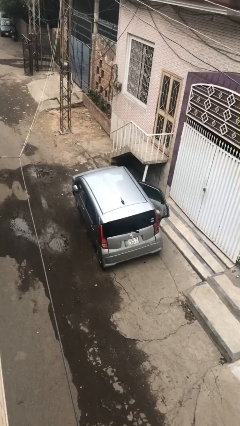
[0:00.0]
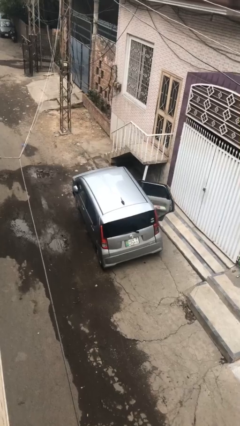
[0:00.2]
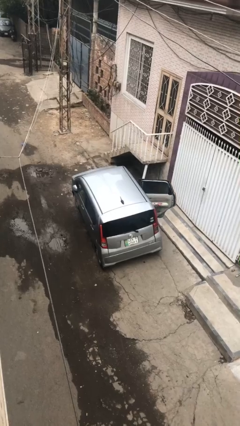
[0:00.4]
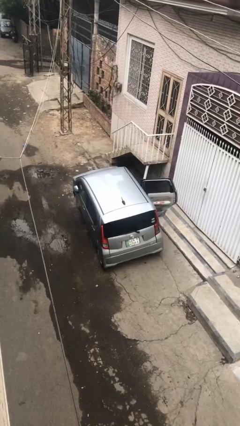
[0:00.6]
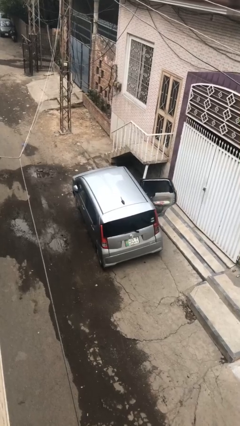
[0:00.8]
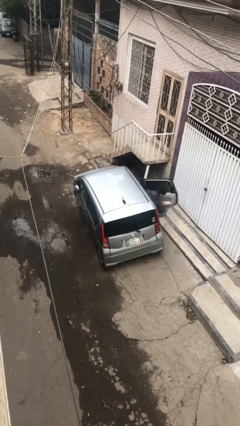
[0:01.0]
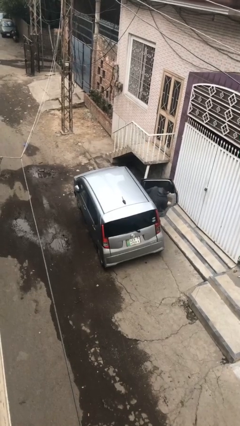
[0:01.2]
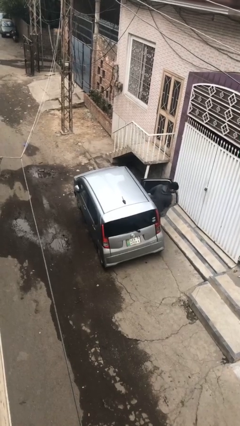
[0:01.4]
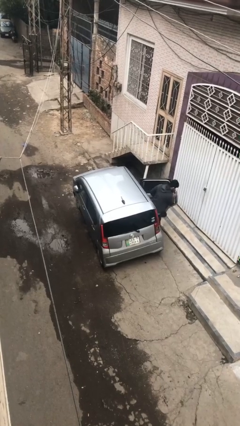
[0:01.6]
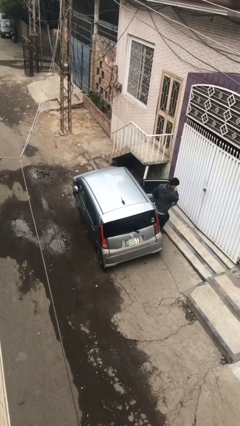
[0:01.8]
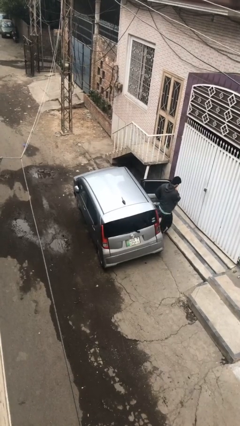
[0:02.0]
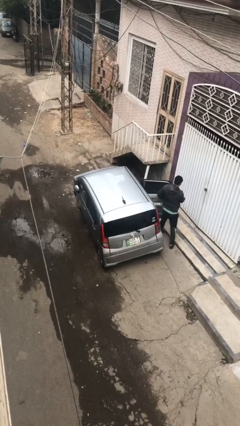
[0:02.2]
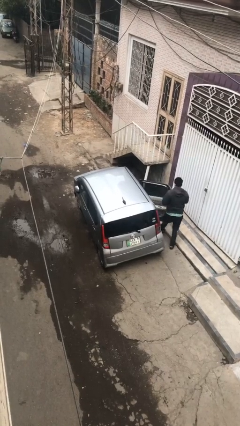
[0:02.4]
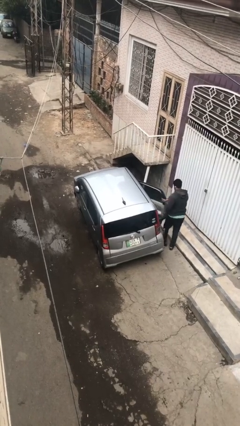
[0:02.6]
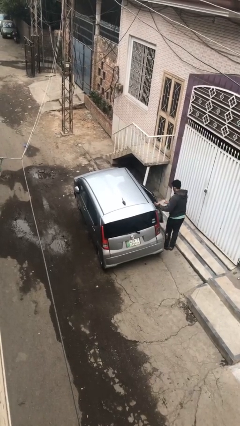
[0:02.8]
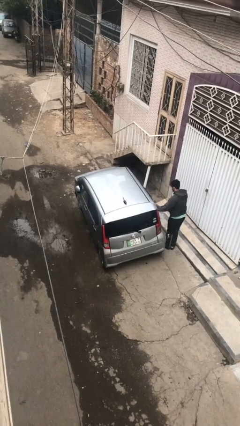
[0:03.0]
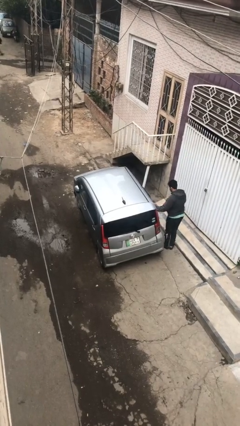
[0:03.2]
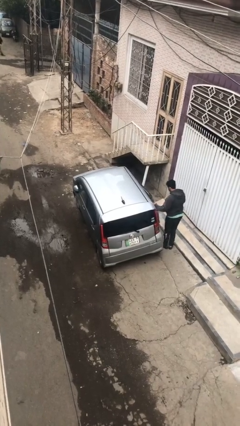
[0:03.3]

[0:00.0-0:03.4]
car drops off person

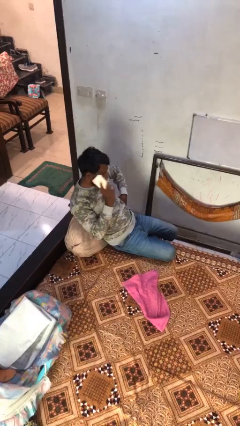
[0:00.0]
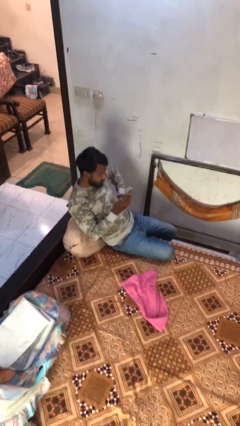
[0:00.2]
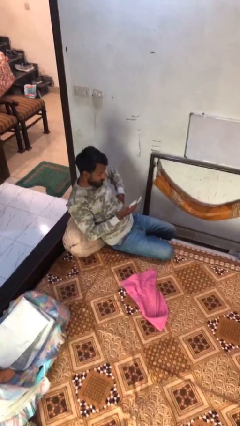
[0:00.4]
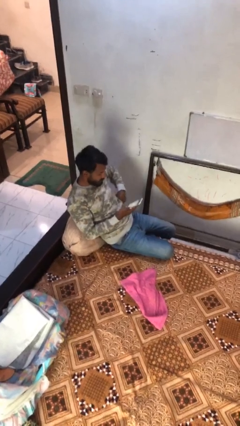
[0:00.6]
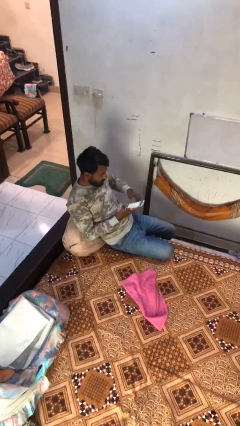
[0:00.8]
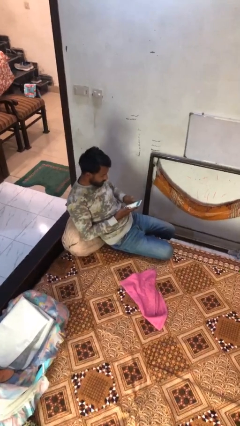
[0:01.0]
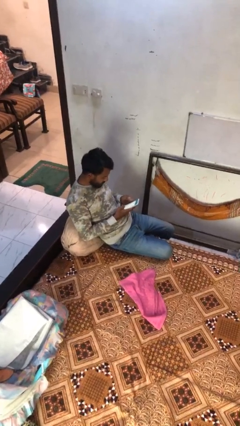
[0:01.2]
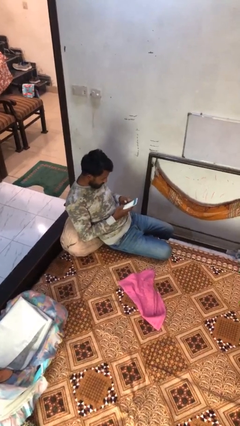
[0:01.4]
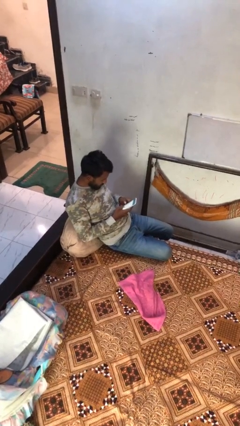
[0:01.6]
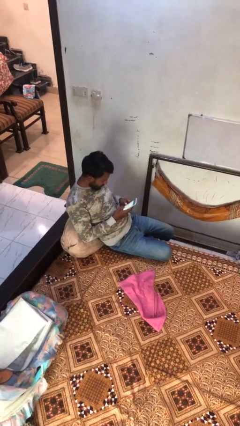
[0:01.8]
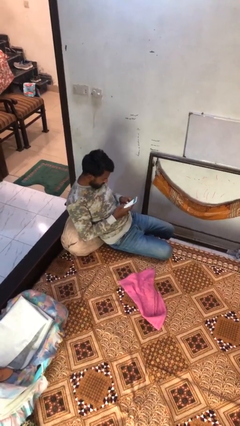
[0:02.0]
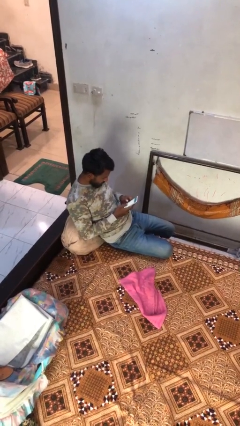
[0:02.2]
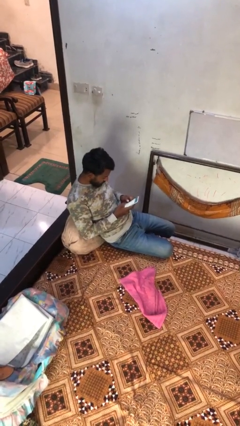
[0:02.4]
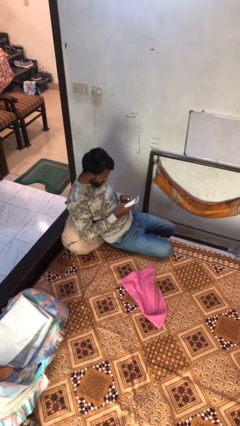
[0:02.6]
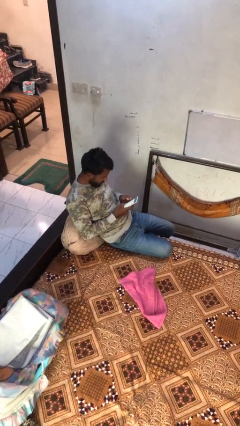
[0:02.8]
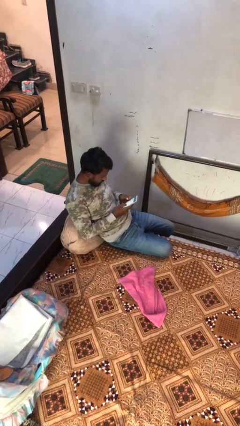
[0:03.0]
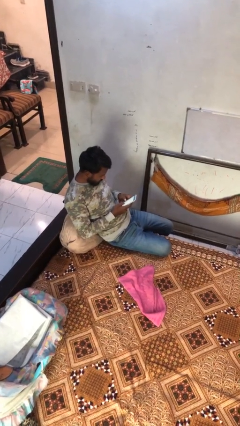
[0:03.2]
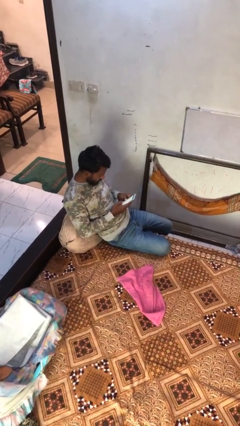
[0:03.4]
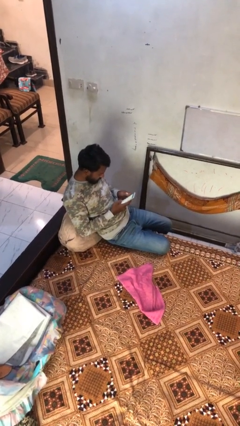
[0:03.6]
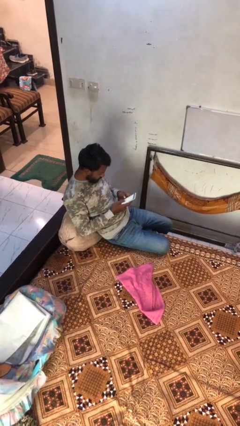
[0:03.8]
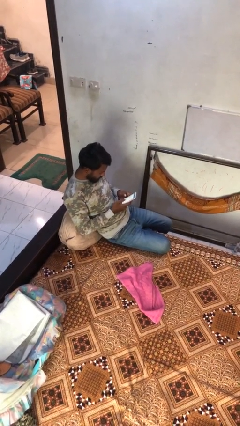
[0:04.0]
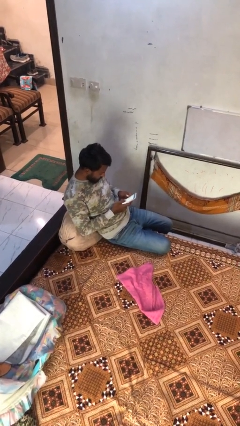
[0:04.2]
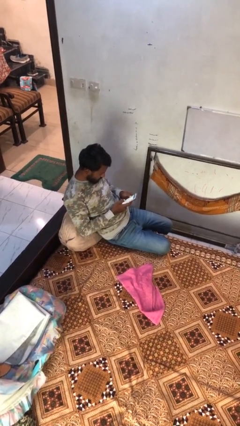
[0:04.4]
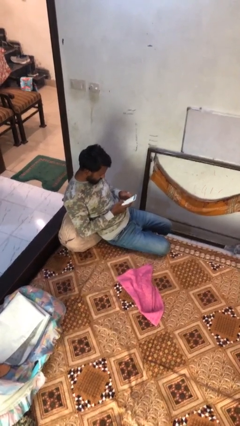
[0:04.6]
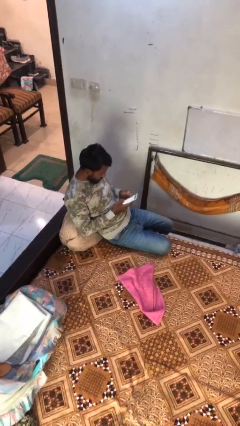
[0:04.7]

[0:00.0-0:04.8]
person texts on phone

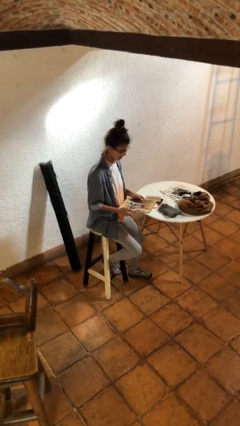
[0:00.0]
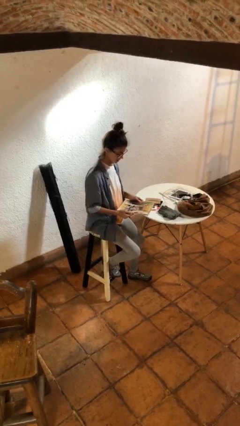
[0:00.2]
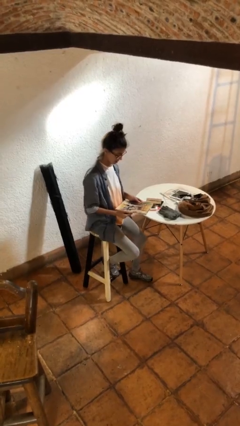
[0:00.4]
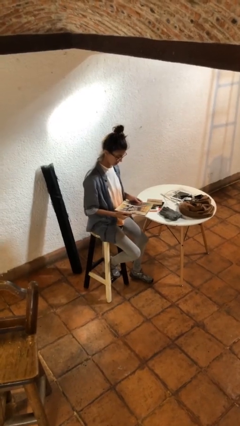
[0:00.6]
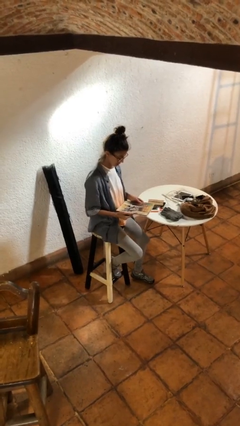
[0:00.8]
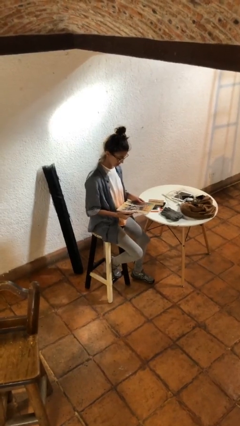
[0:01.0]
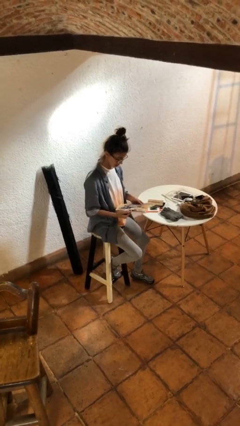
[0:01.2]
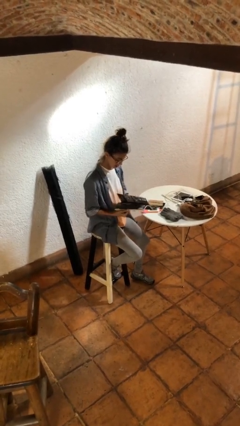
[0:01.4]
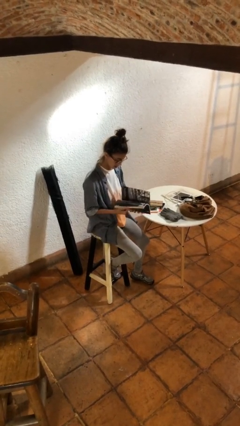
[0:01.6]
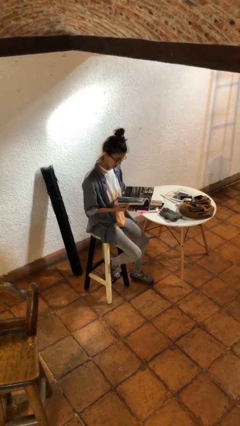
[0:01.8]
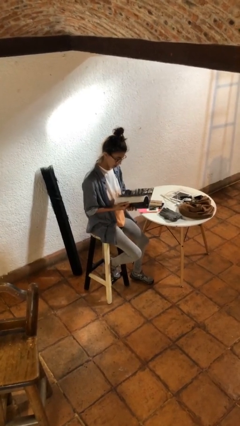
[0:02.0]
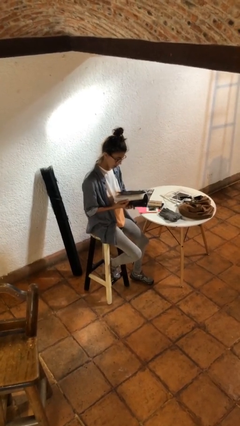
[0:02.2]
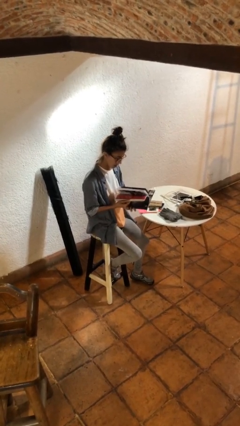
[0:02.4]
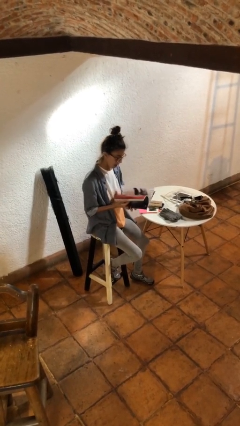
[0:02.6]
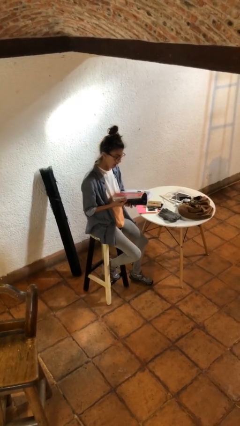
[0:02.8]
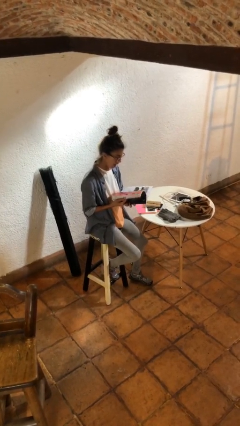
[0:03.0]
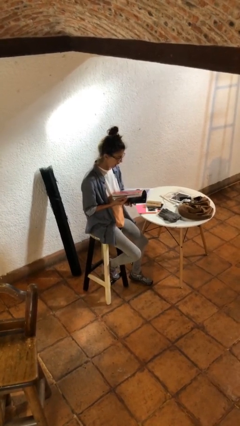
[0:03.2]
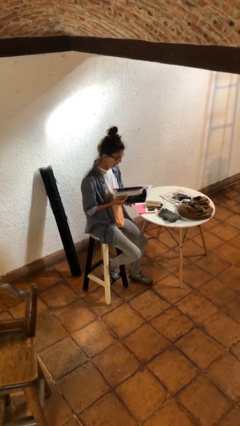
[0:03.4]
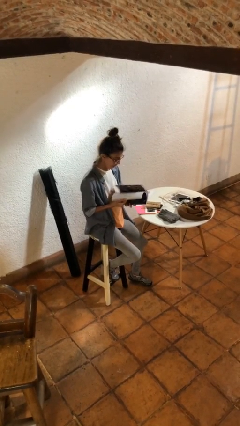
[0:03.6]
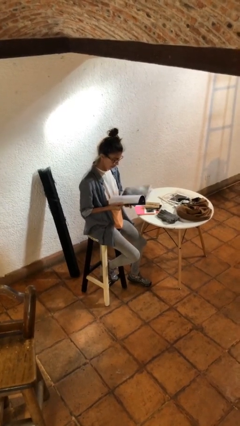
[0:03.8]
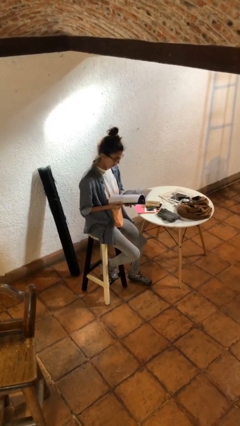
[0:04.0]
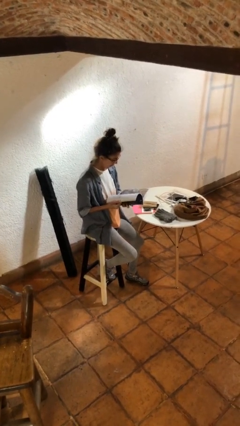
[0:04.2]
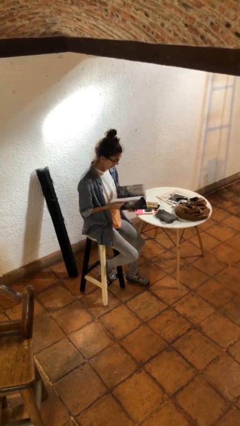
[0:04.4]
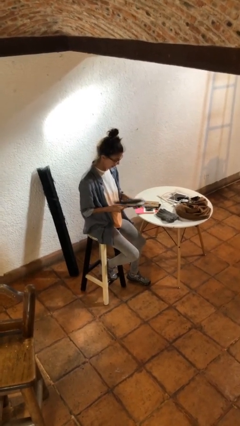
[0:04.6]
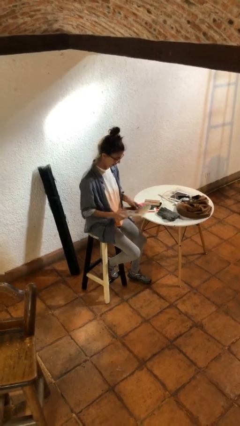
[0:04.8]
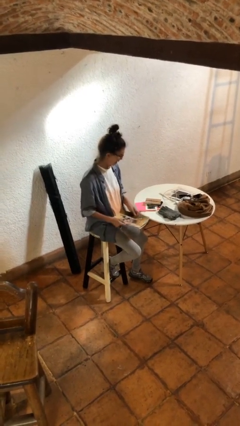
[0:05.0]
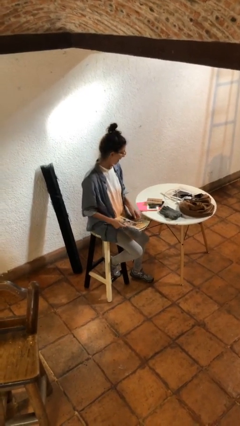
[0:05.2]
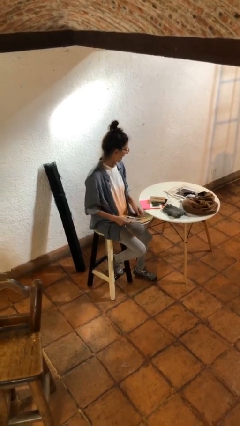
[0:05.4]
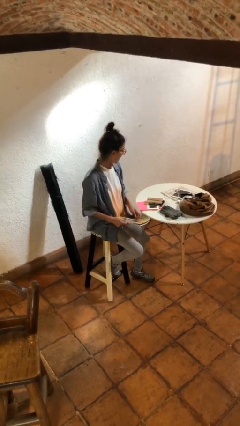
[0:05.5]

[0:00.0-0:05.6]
person reads magazine

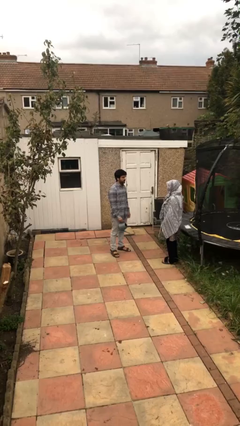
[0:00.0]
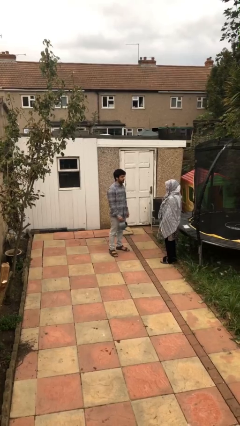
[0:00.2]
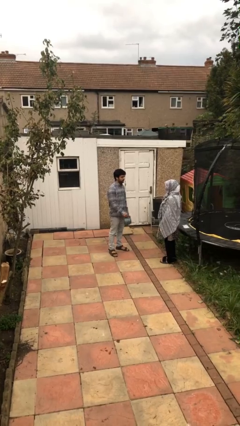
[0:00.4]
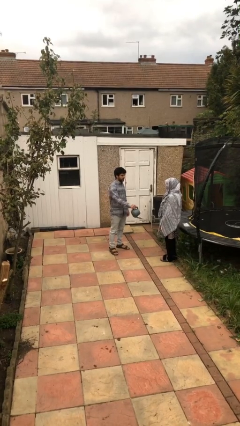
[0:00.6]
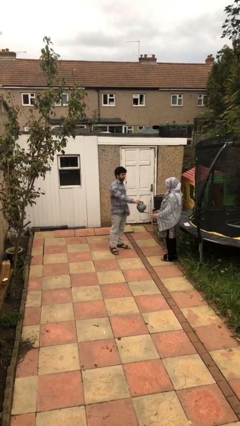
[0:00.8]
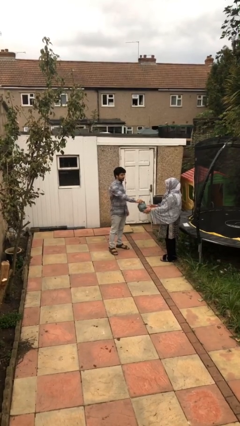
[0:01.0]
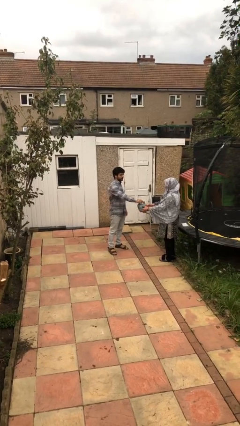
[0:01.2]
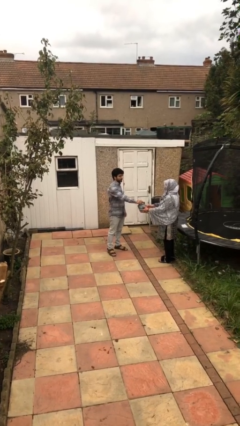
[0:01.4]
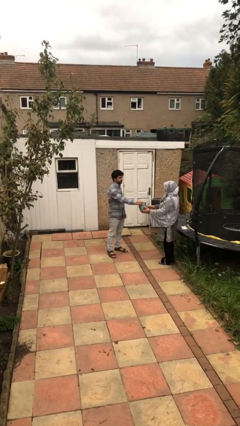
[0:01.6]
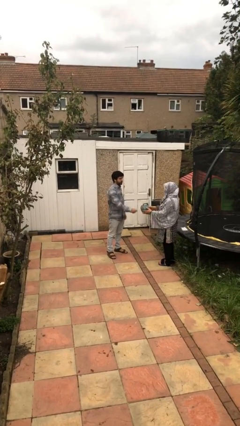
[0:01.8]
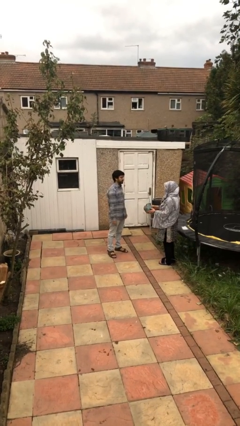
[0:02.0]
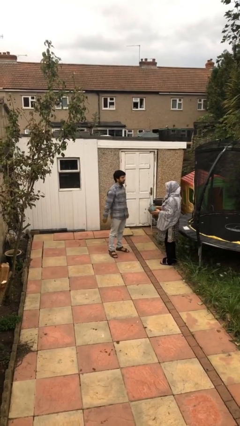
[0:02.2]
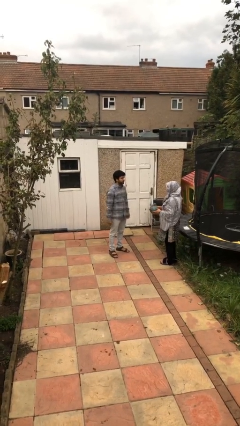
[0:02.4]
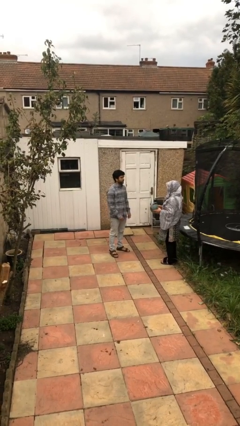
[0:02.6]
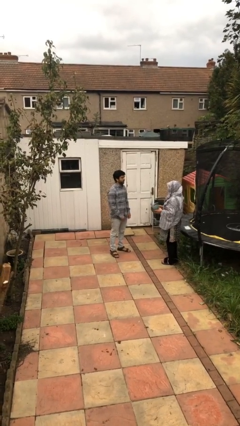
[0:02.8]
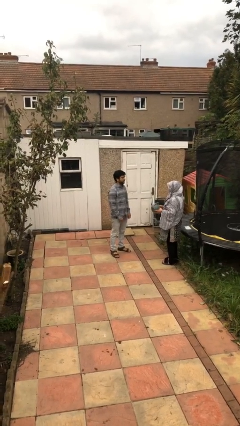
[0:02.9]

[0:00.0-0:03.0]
person transfers object to person

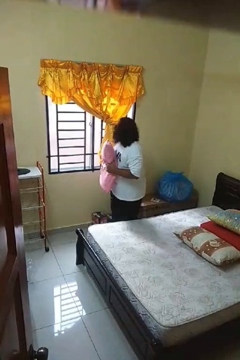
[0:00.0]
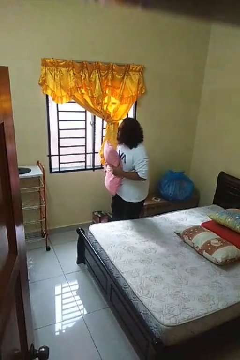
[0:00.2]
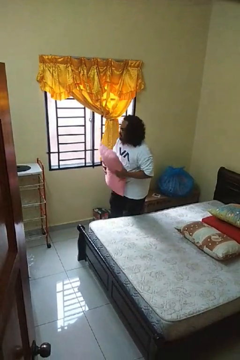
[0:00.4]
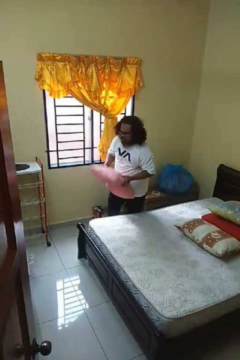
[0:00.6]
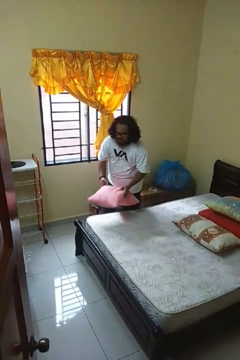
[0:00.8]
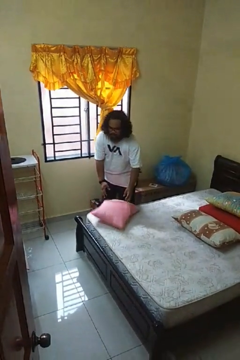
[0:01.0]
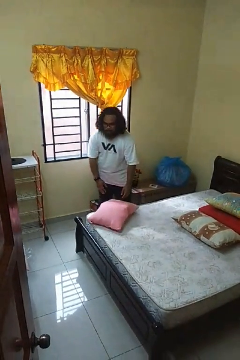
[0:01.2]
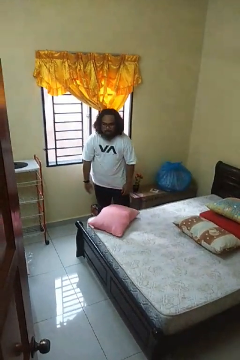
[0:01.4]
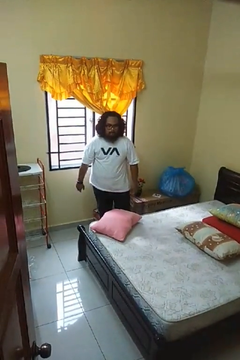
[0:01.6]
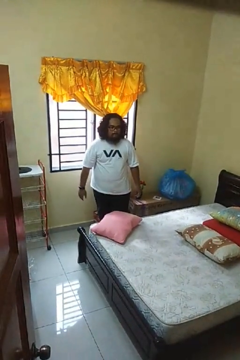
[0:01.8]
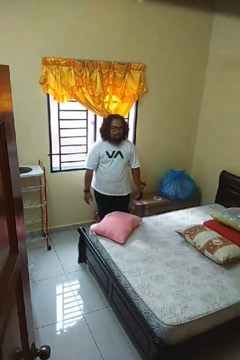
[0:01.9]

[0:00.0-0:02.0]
person puts down object on bed
